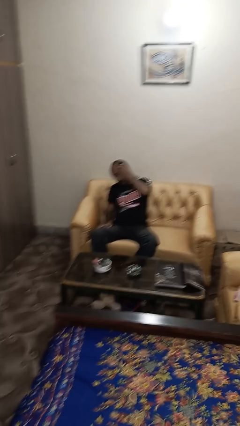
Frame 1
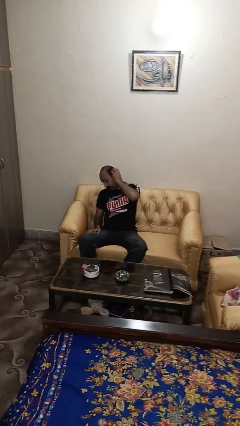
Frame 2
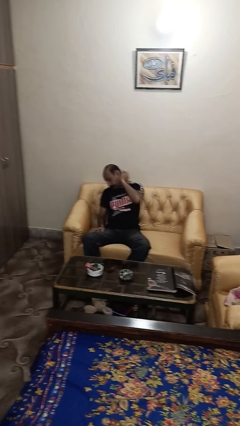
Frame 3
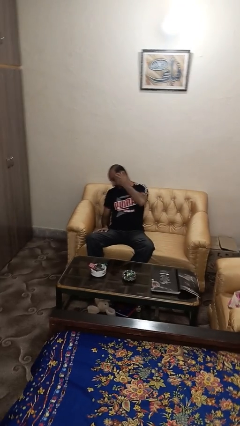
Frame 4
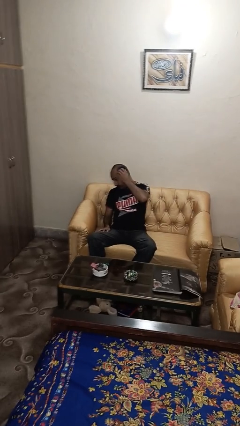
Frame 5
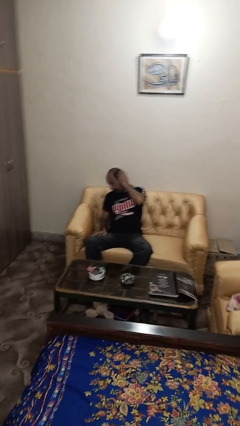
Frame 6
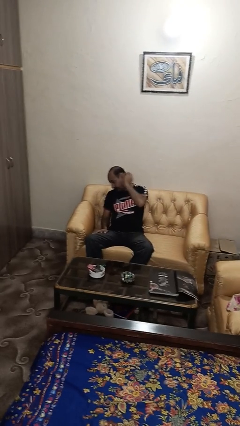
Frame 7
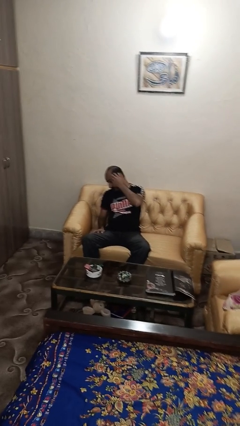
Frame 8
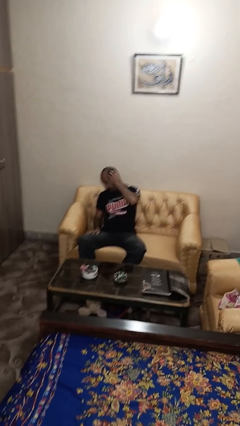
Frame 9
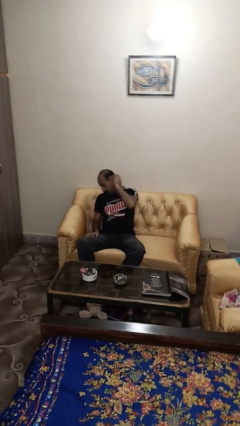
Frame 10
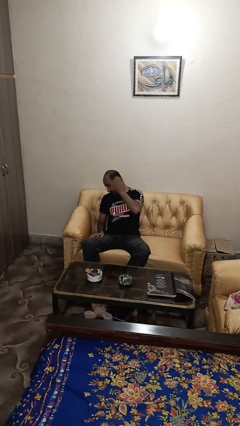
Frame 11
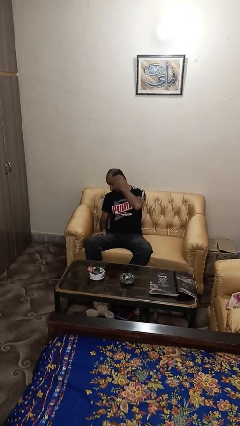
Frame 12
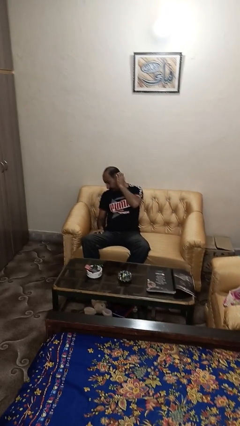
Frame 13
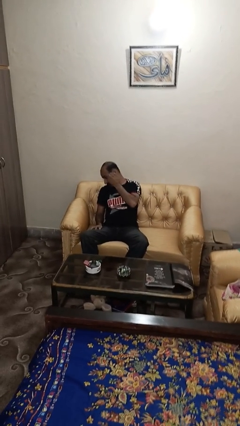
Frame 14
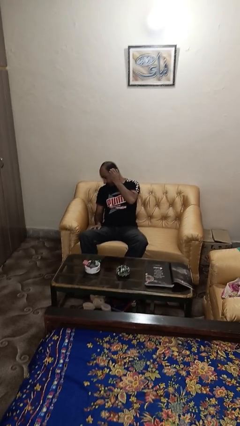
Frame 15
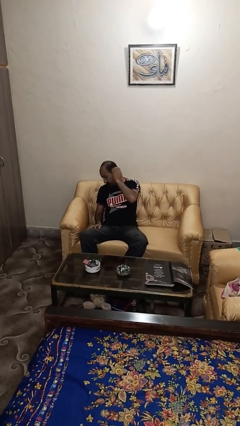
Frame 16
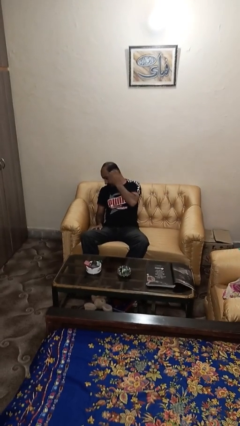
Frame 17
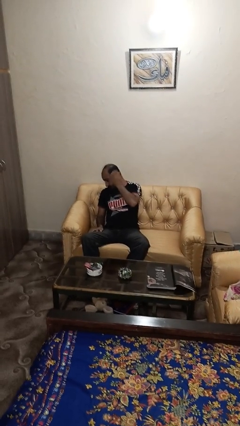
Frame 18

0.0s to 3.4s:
person strokes hair

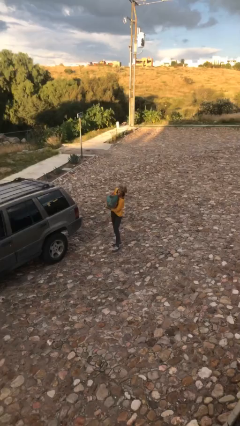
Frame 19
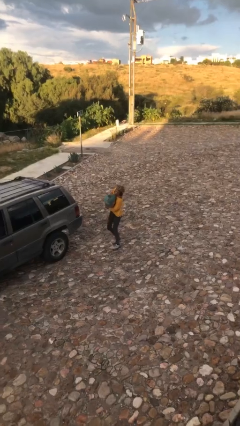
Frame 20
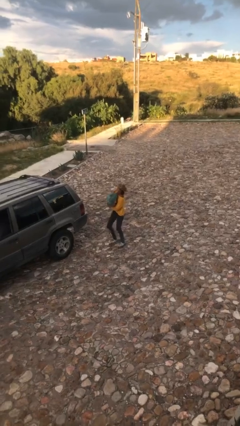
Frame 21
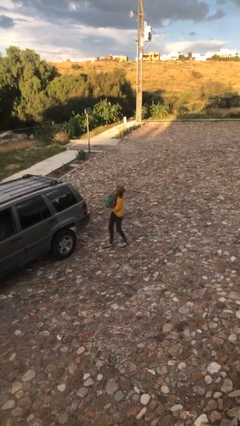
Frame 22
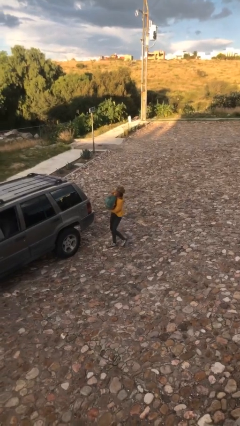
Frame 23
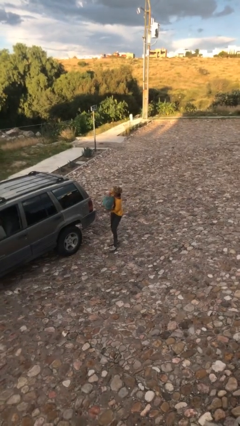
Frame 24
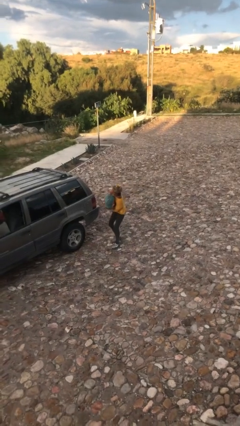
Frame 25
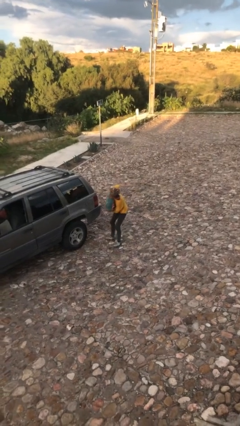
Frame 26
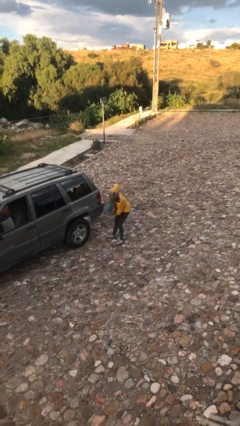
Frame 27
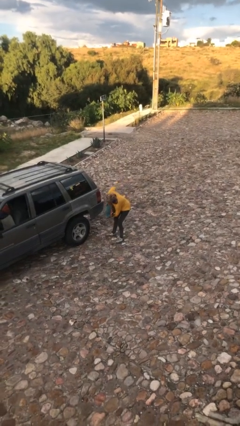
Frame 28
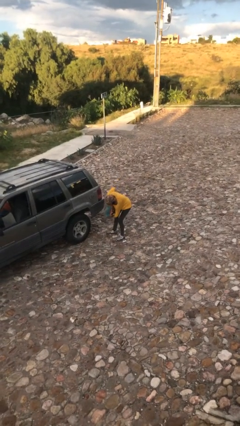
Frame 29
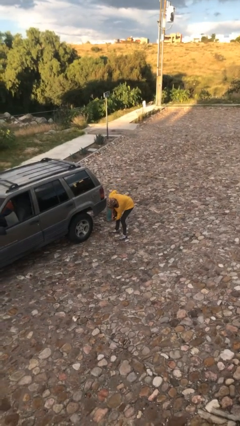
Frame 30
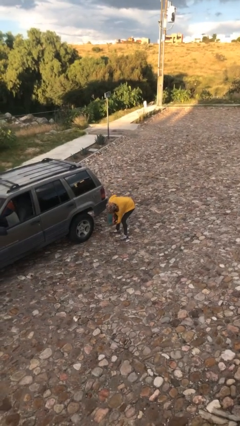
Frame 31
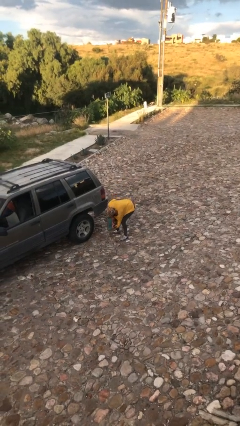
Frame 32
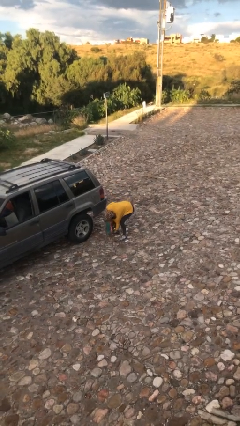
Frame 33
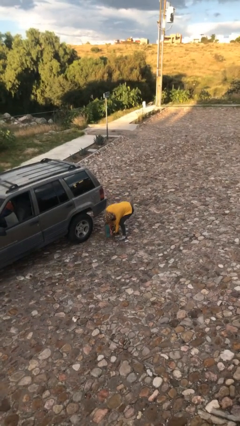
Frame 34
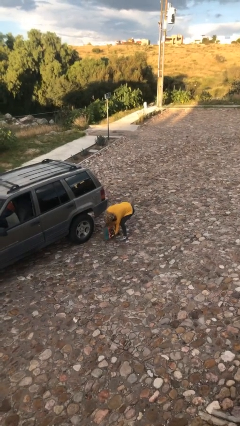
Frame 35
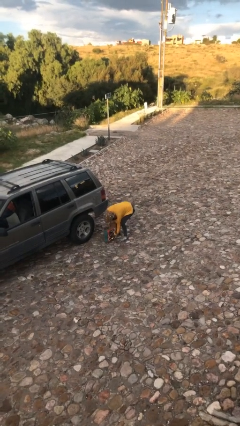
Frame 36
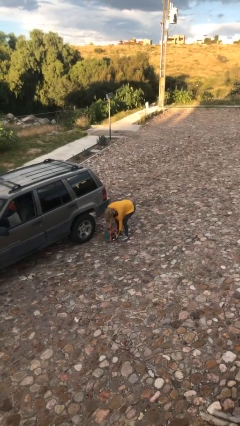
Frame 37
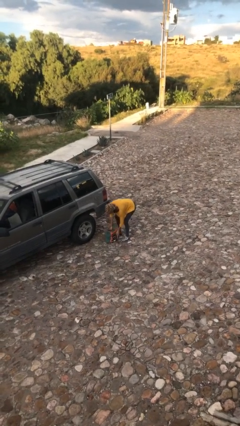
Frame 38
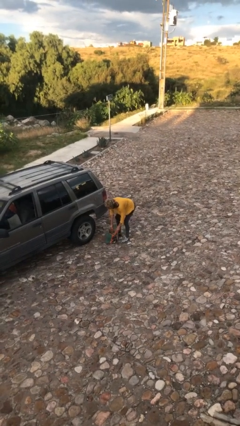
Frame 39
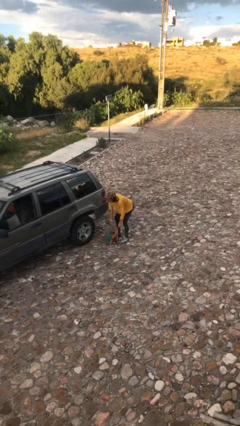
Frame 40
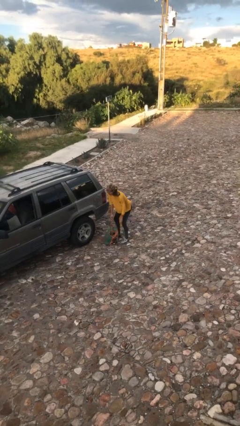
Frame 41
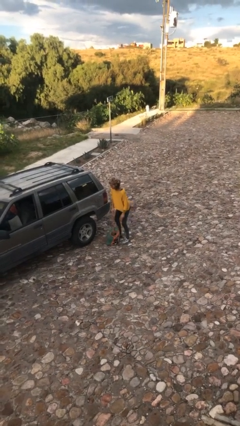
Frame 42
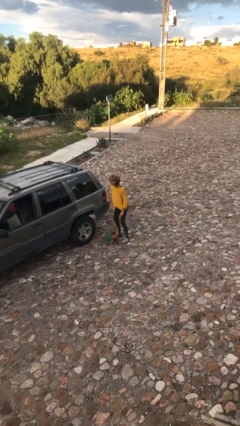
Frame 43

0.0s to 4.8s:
person puts down object on floor

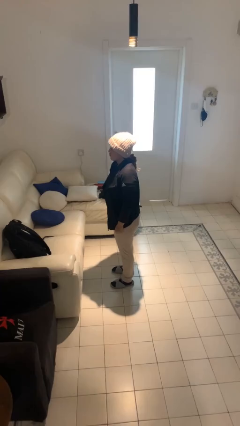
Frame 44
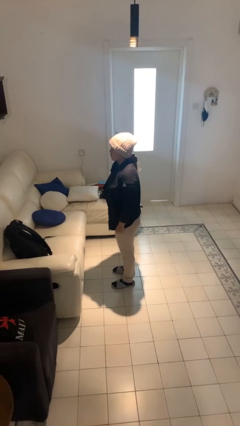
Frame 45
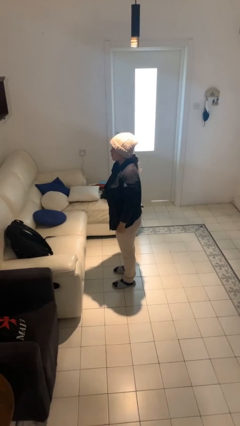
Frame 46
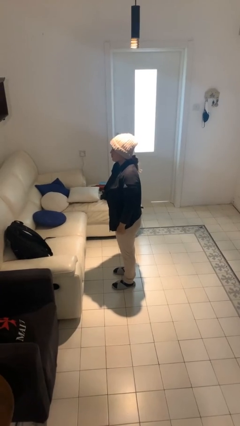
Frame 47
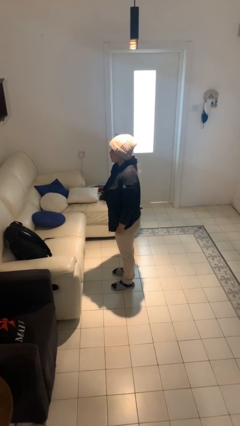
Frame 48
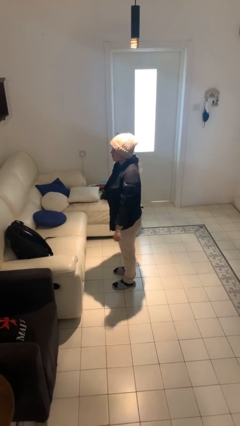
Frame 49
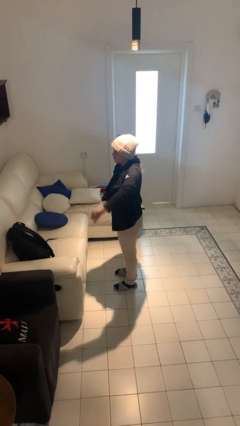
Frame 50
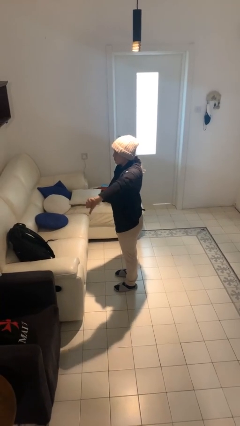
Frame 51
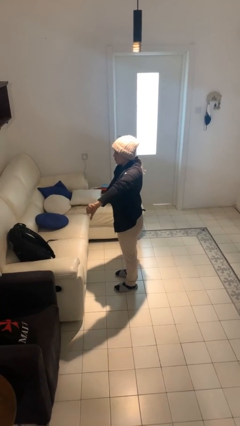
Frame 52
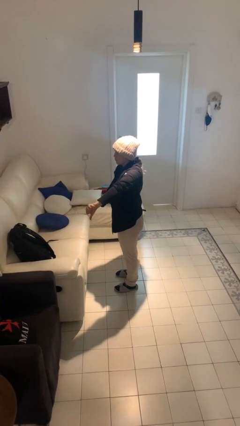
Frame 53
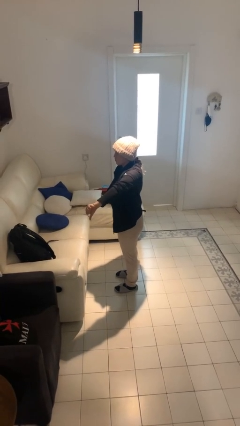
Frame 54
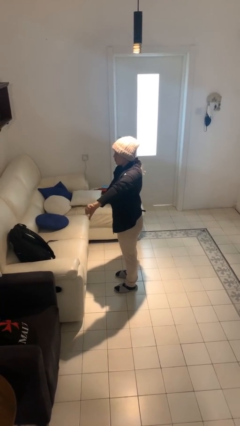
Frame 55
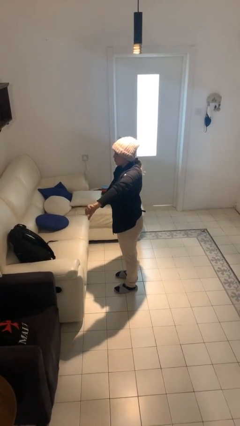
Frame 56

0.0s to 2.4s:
person gestures thumbs down

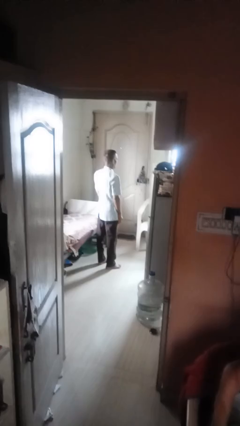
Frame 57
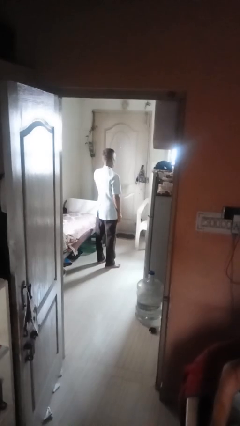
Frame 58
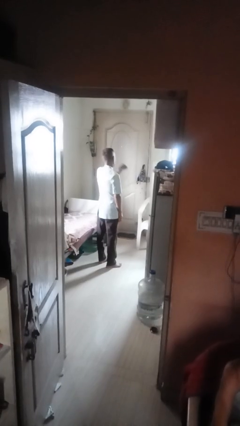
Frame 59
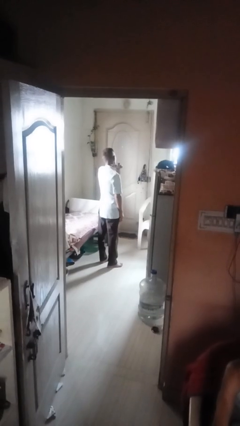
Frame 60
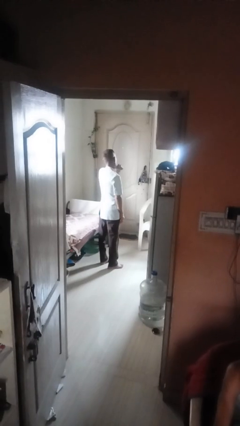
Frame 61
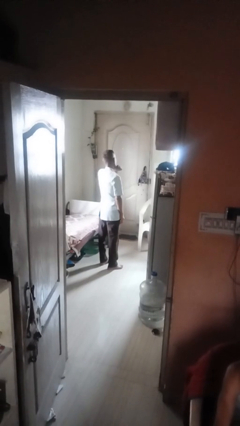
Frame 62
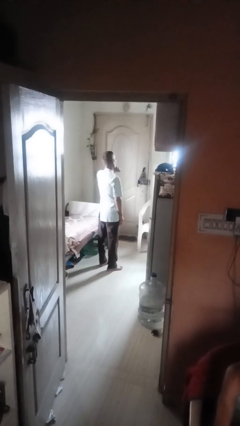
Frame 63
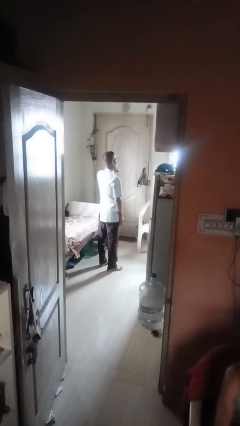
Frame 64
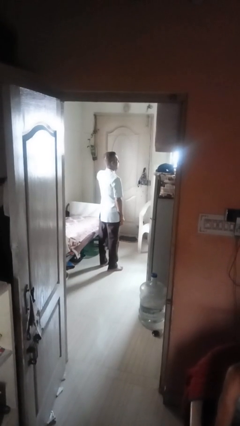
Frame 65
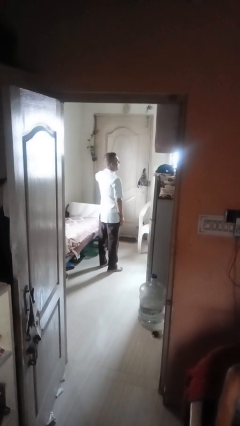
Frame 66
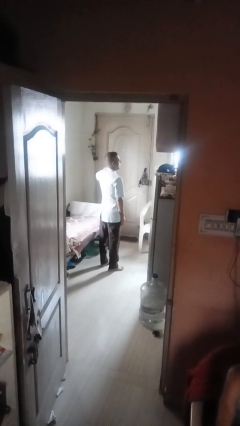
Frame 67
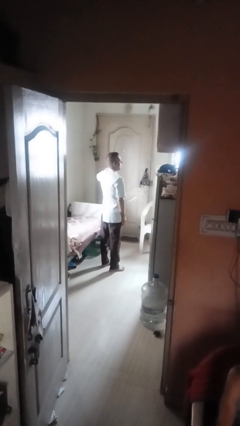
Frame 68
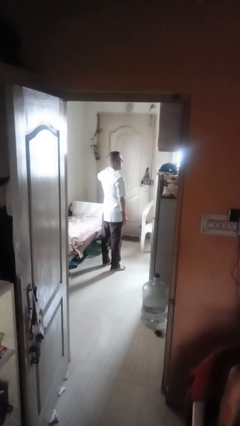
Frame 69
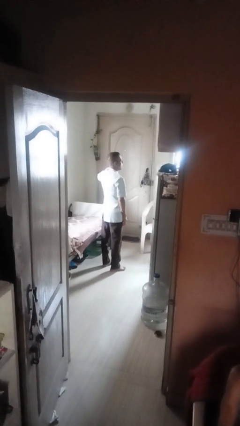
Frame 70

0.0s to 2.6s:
person gestures cut

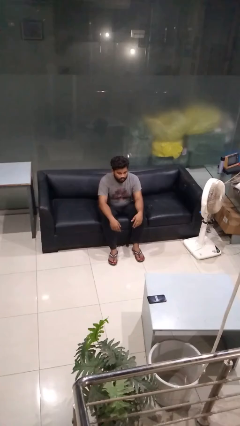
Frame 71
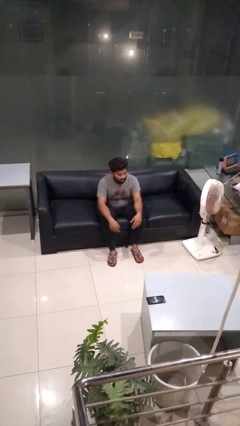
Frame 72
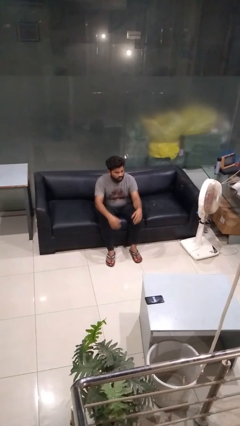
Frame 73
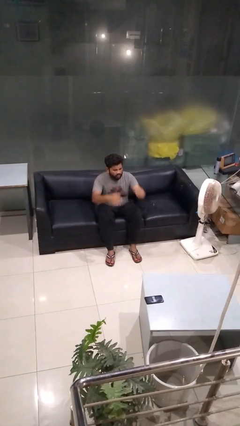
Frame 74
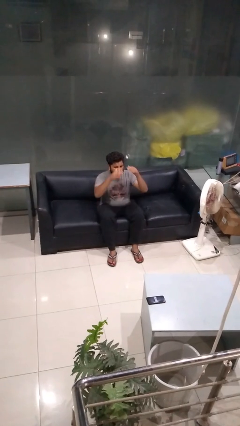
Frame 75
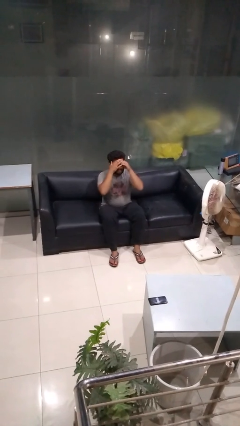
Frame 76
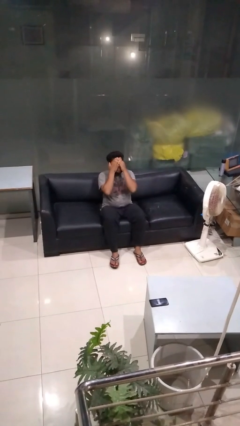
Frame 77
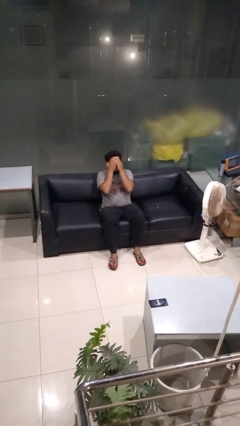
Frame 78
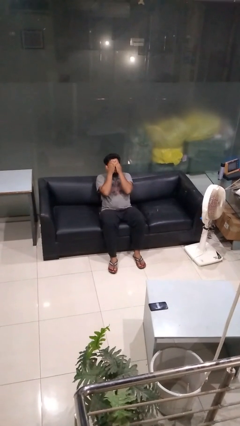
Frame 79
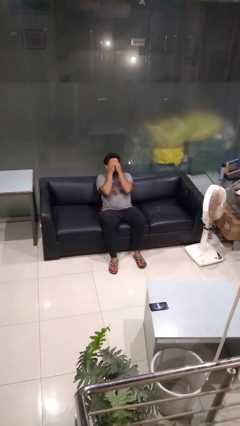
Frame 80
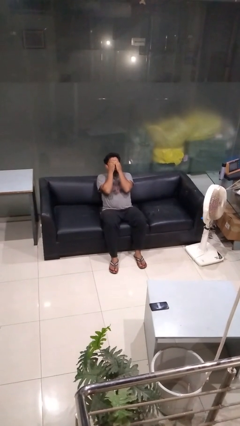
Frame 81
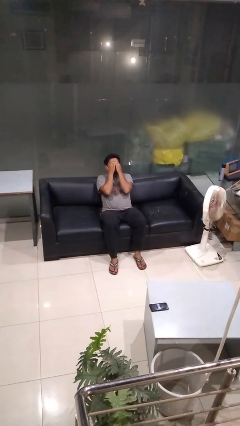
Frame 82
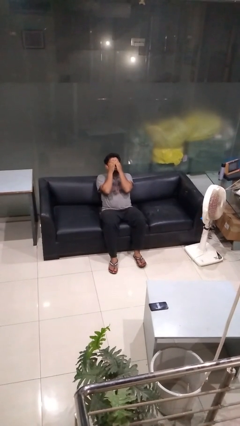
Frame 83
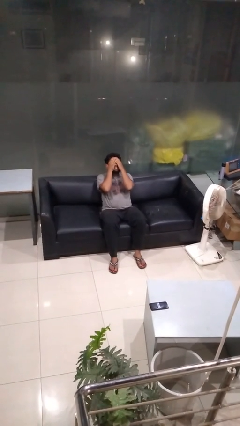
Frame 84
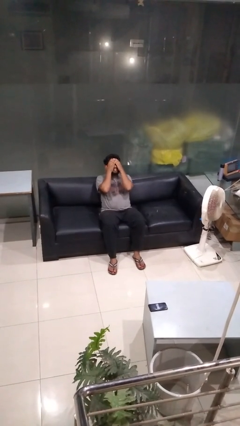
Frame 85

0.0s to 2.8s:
person covers face with hands

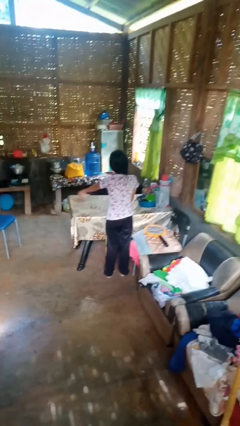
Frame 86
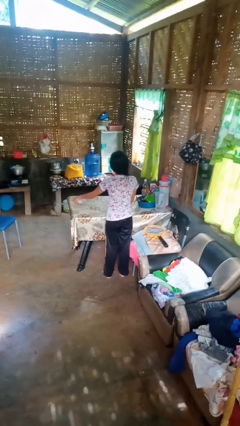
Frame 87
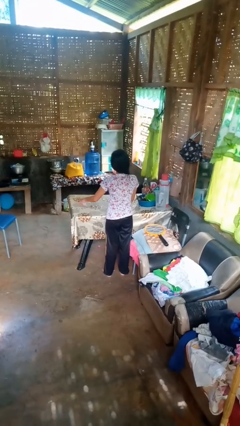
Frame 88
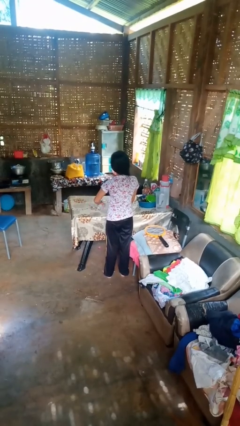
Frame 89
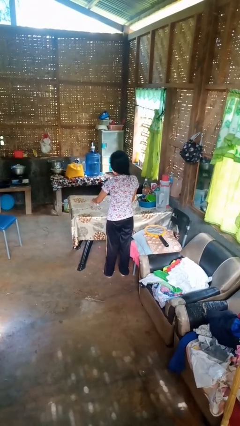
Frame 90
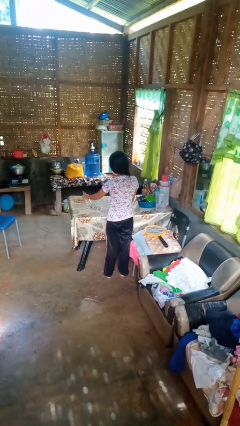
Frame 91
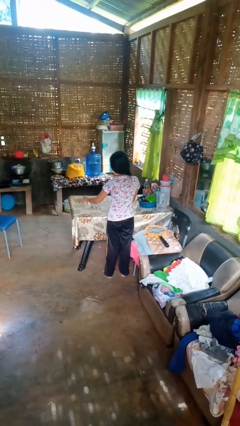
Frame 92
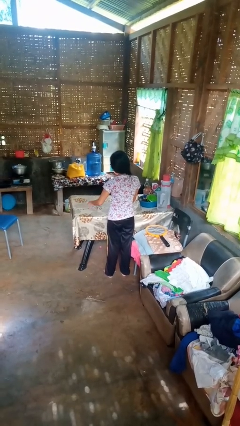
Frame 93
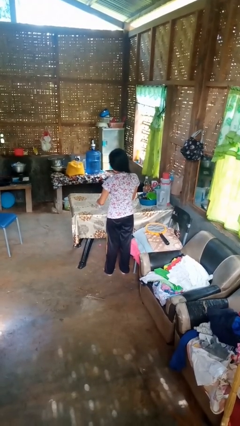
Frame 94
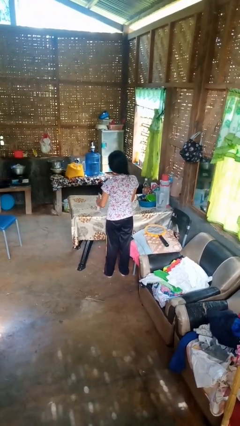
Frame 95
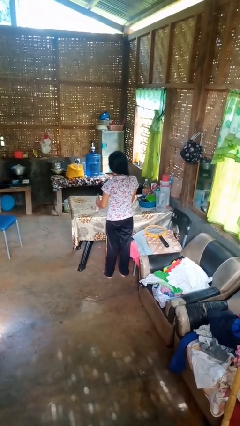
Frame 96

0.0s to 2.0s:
person sprays from bottle
